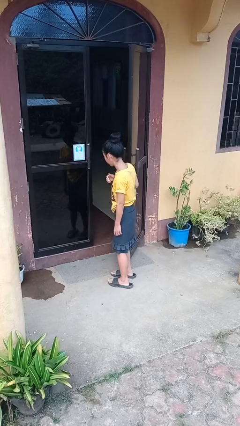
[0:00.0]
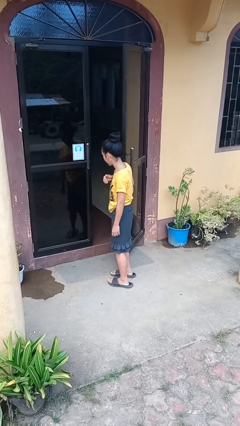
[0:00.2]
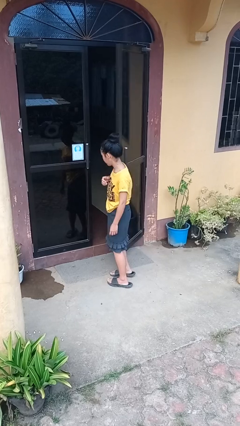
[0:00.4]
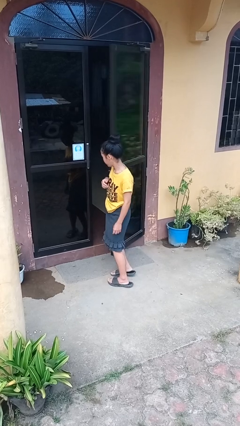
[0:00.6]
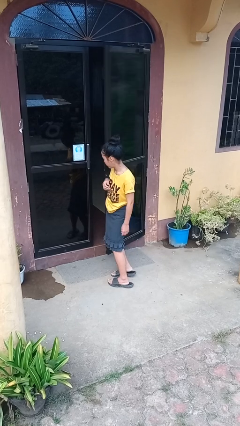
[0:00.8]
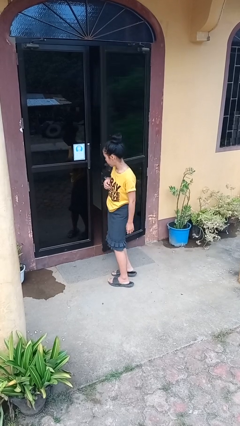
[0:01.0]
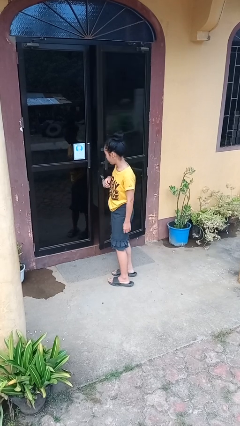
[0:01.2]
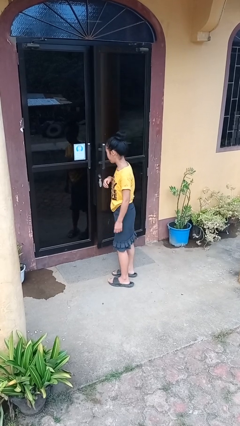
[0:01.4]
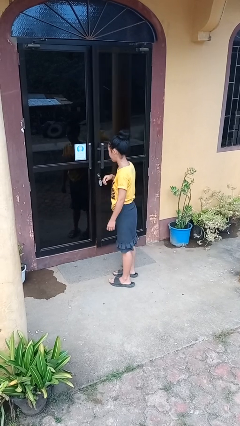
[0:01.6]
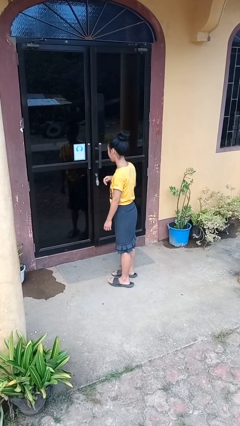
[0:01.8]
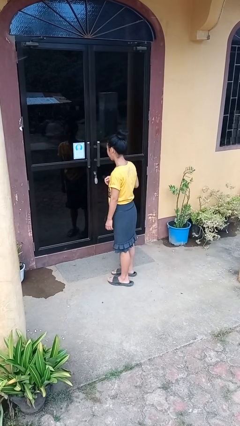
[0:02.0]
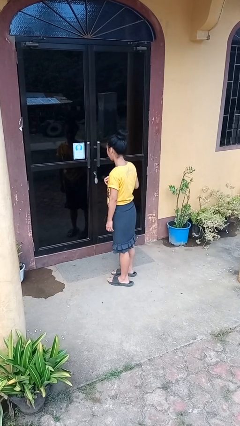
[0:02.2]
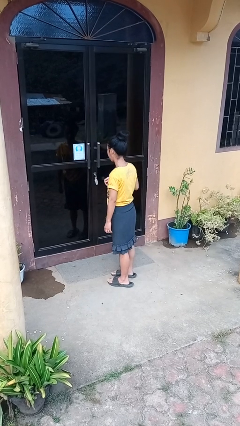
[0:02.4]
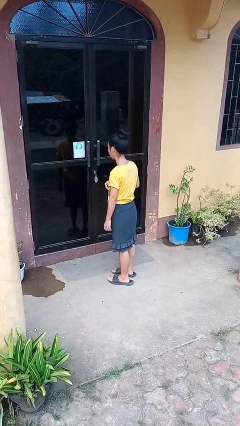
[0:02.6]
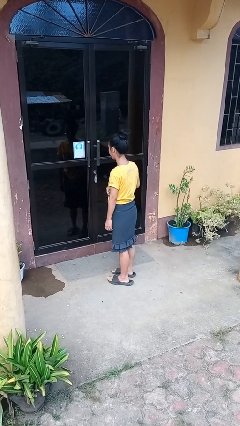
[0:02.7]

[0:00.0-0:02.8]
person closes door with hip

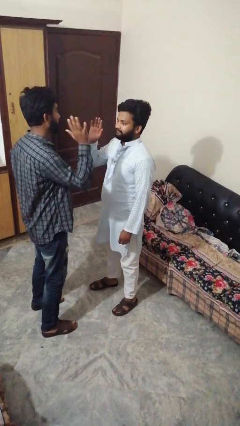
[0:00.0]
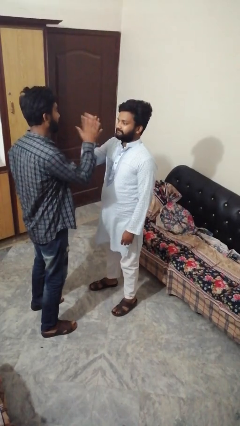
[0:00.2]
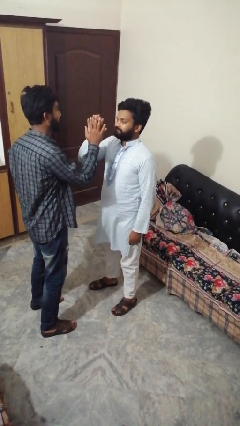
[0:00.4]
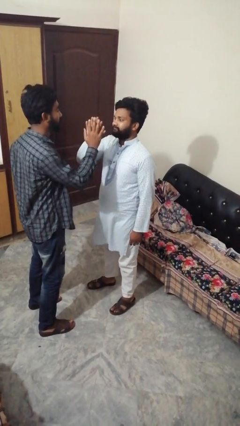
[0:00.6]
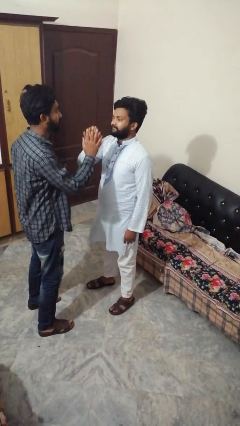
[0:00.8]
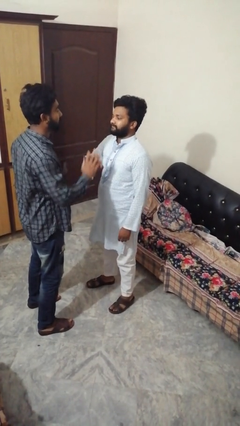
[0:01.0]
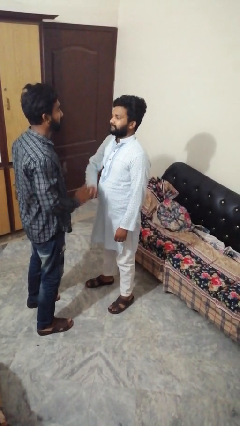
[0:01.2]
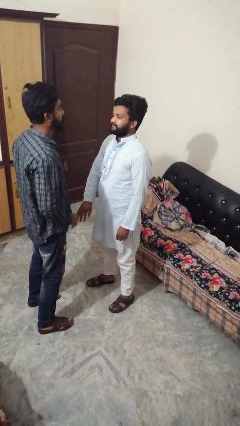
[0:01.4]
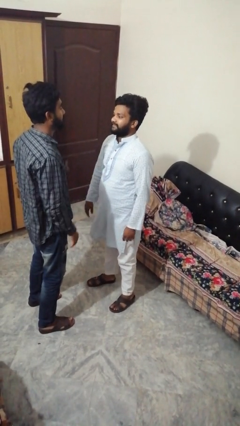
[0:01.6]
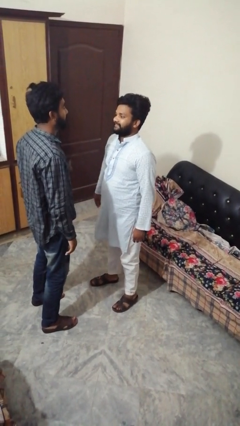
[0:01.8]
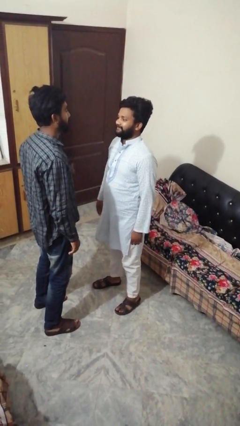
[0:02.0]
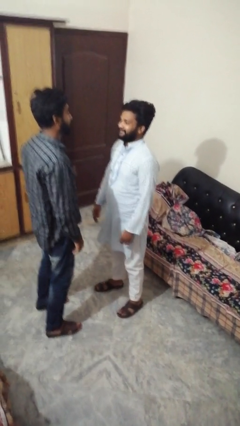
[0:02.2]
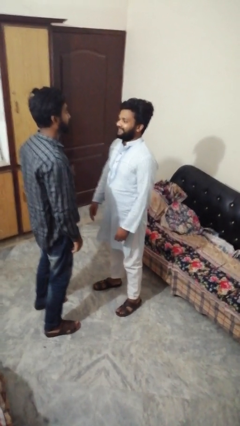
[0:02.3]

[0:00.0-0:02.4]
person highfives hand

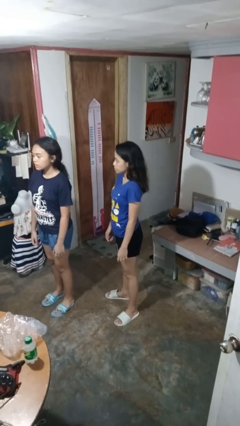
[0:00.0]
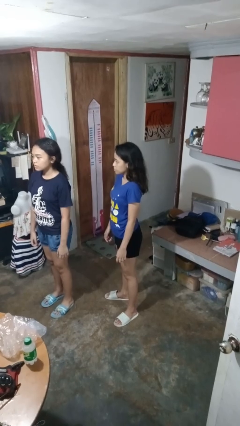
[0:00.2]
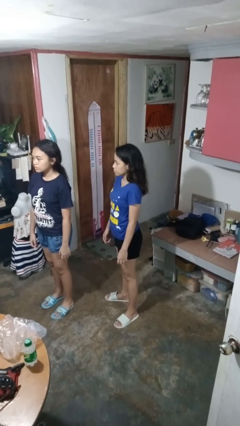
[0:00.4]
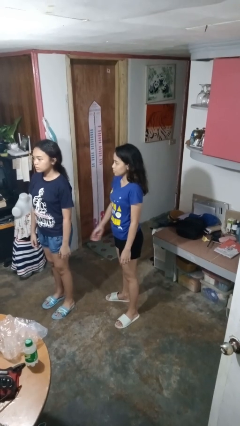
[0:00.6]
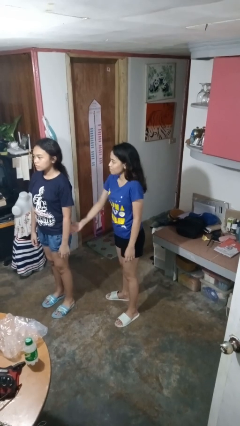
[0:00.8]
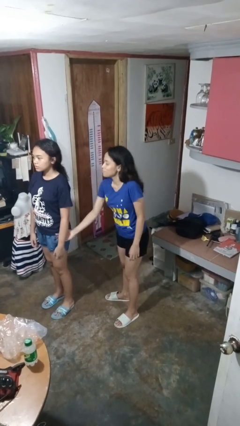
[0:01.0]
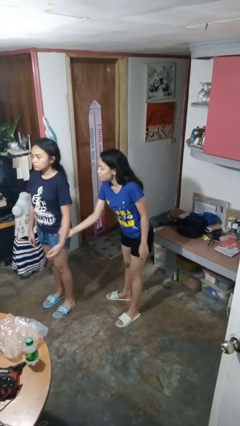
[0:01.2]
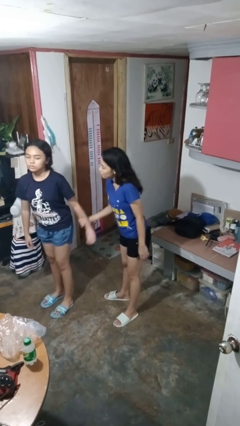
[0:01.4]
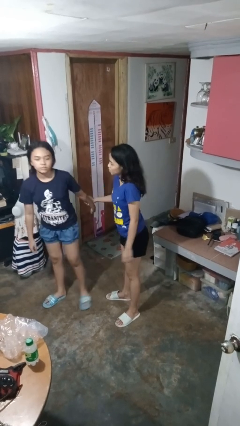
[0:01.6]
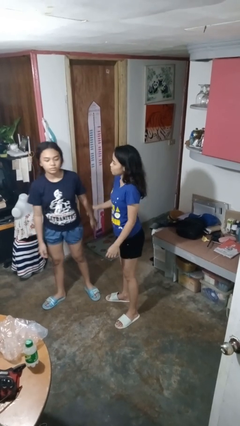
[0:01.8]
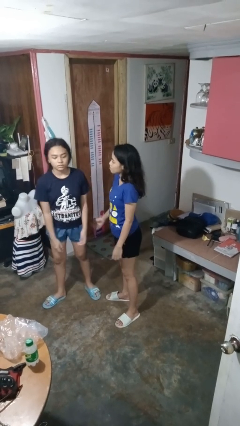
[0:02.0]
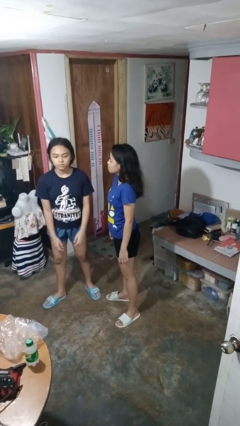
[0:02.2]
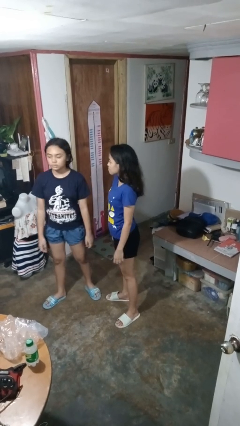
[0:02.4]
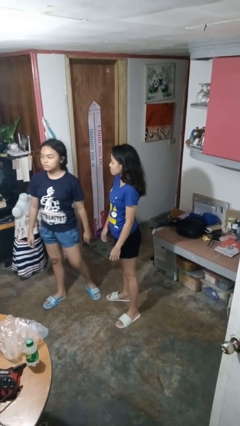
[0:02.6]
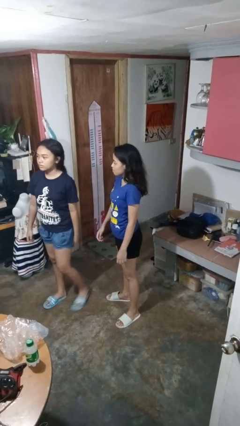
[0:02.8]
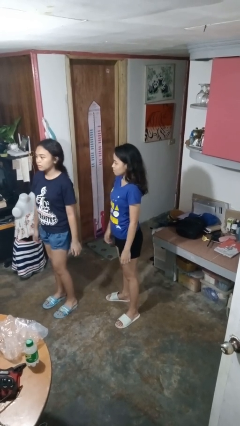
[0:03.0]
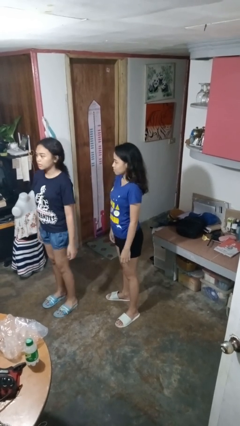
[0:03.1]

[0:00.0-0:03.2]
person grabs person by forearm

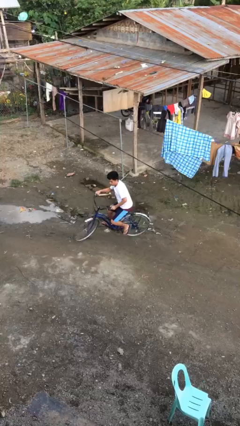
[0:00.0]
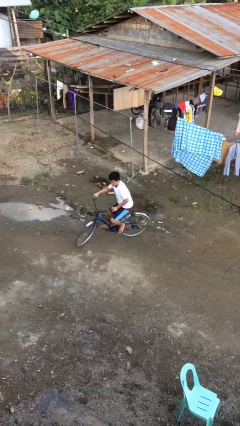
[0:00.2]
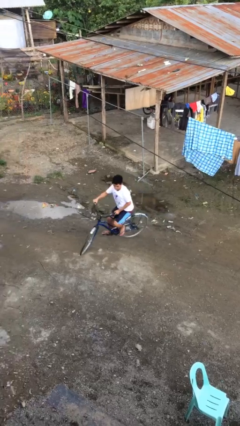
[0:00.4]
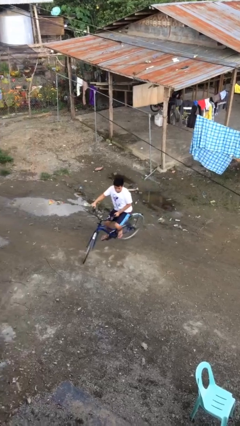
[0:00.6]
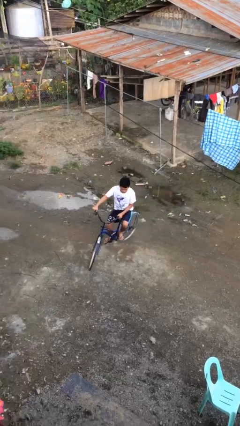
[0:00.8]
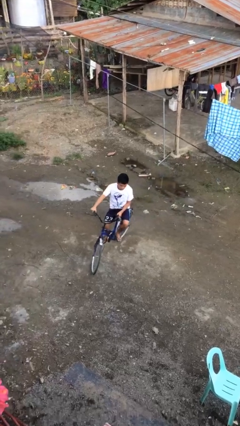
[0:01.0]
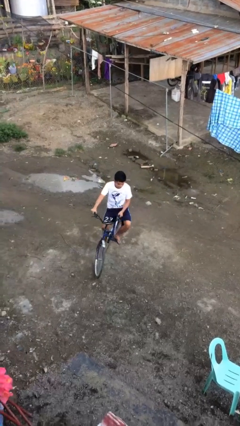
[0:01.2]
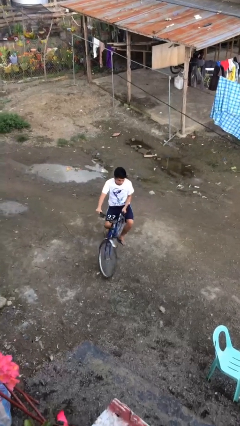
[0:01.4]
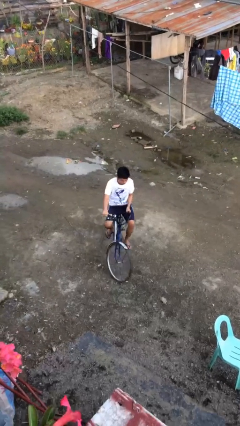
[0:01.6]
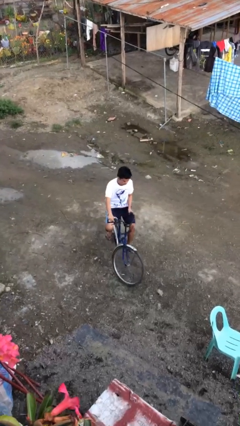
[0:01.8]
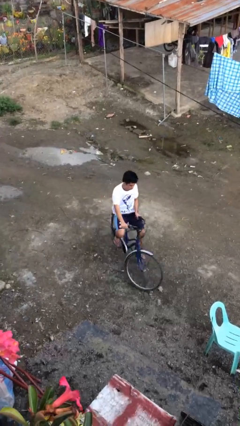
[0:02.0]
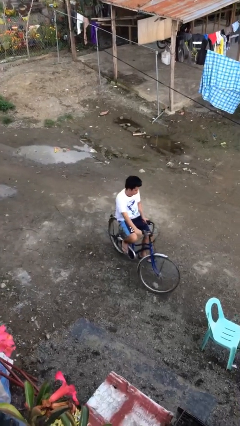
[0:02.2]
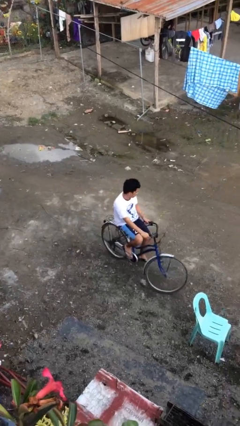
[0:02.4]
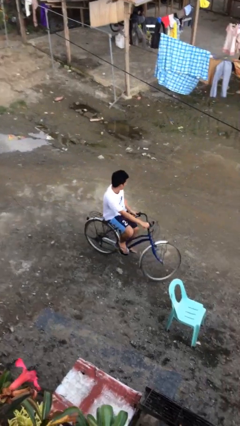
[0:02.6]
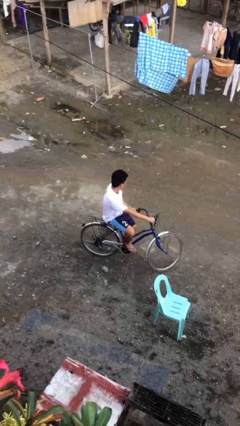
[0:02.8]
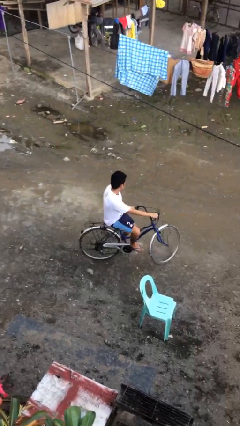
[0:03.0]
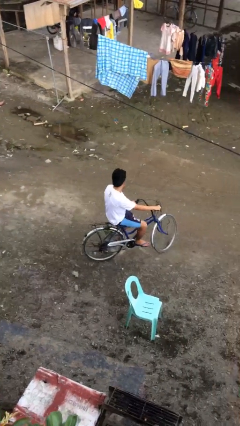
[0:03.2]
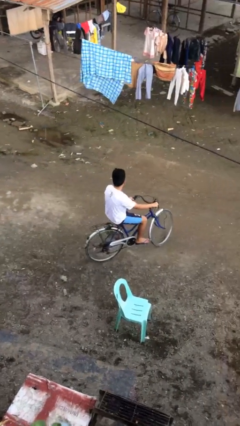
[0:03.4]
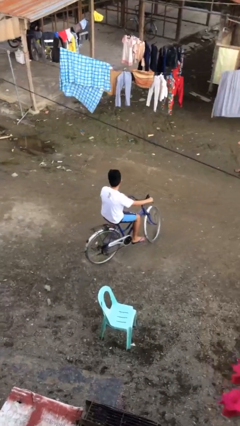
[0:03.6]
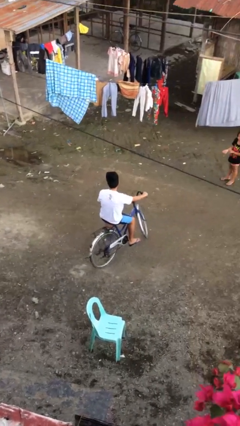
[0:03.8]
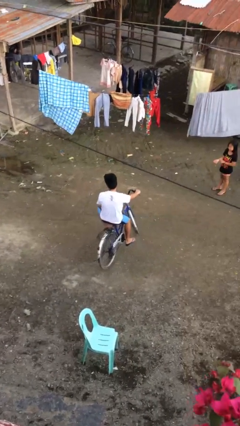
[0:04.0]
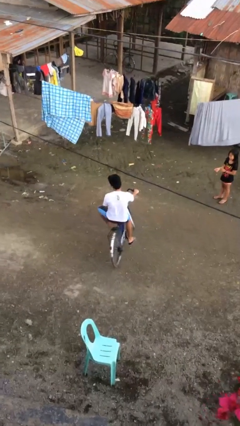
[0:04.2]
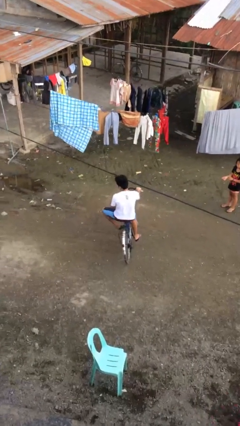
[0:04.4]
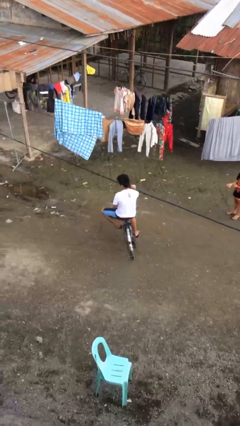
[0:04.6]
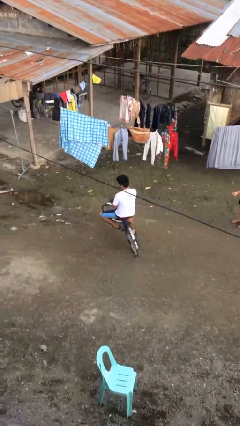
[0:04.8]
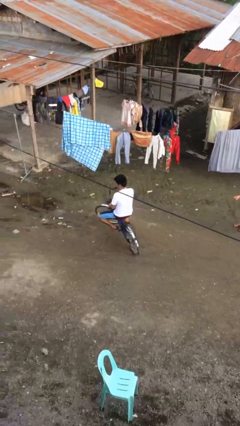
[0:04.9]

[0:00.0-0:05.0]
person rides bicycle

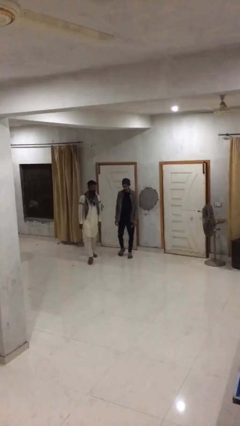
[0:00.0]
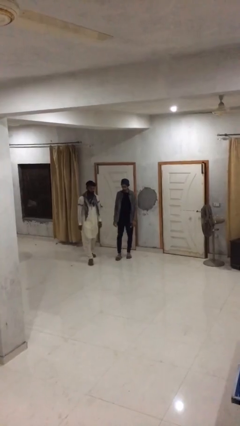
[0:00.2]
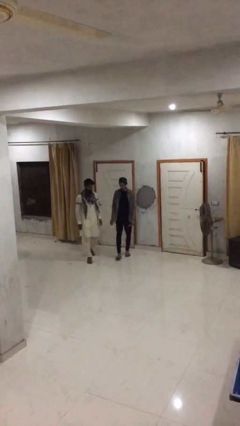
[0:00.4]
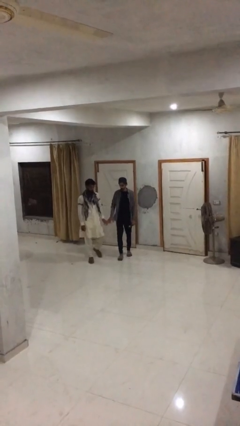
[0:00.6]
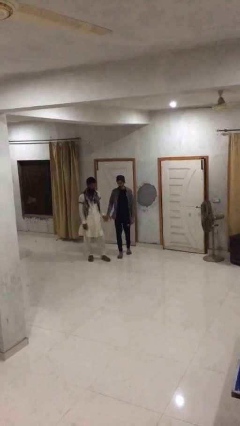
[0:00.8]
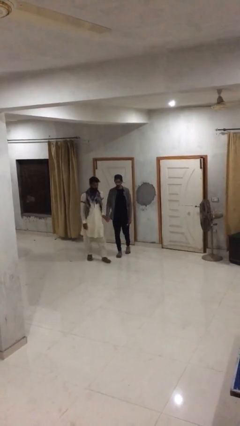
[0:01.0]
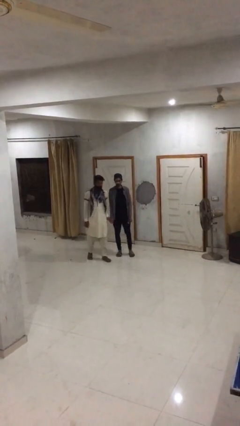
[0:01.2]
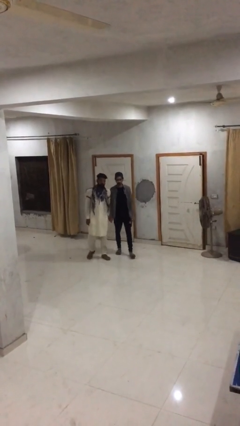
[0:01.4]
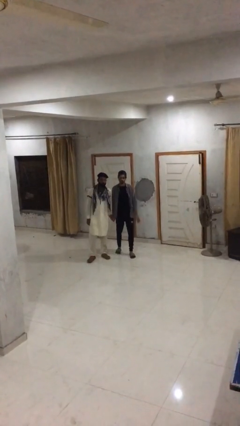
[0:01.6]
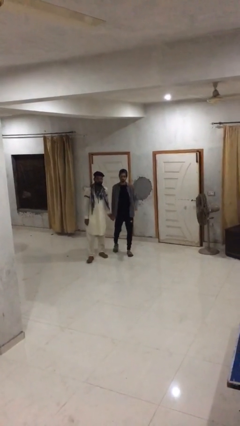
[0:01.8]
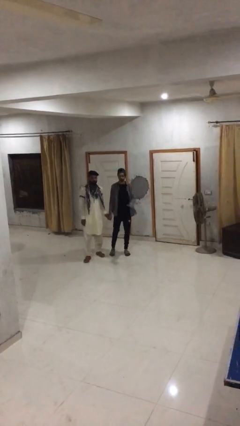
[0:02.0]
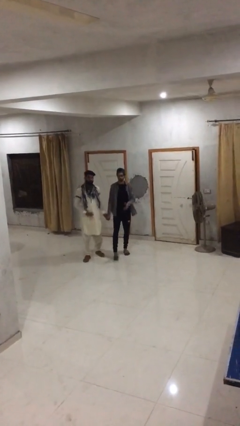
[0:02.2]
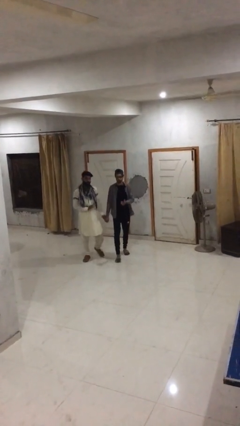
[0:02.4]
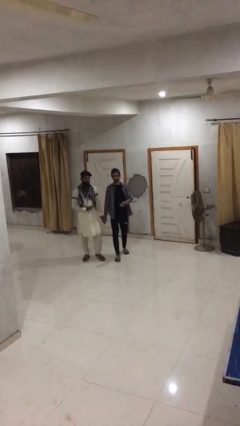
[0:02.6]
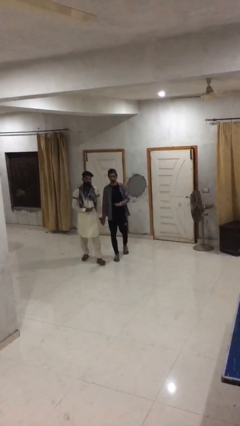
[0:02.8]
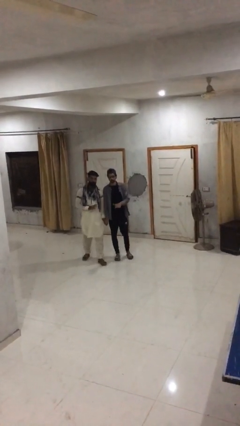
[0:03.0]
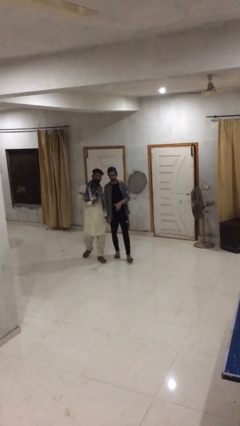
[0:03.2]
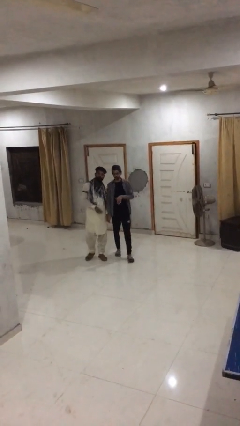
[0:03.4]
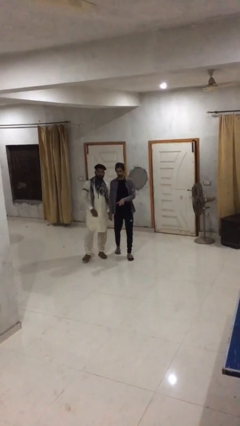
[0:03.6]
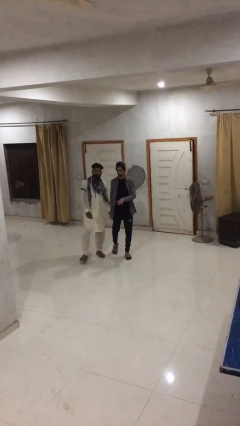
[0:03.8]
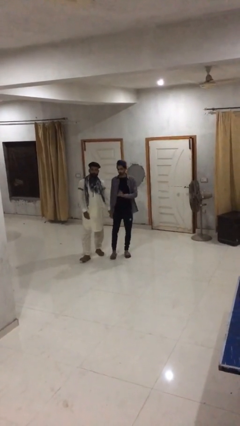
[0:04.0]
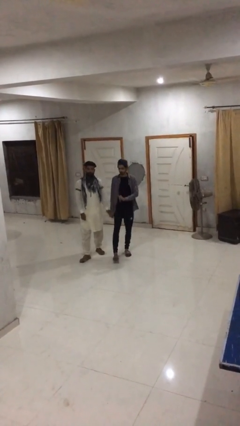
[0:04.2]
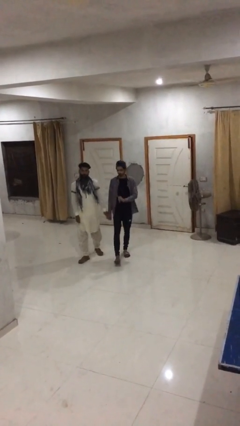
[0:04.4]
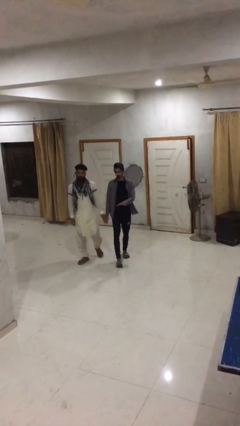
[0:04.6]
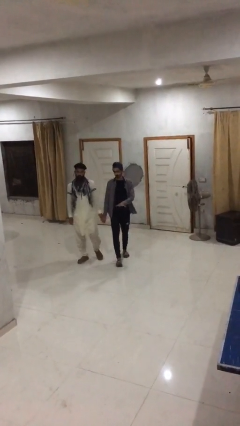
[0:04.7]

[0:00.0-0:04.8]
person holds hand
